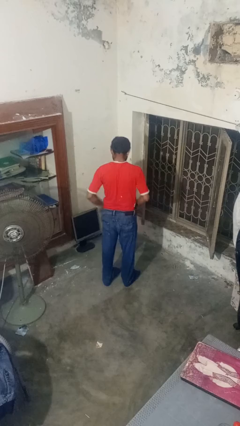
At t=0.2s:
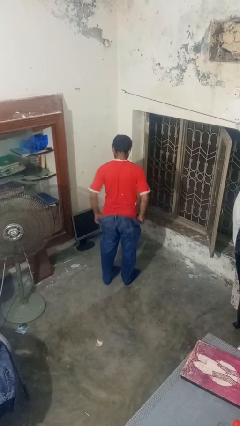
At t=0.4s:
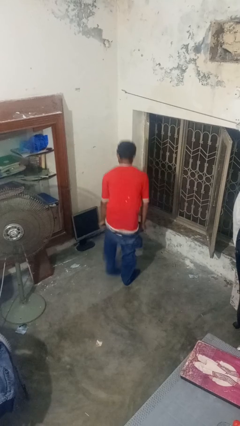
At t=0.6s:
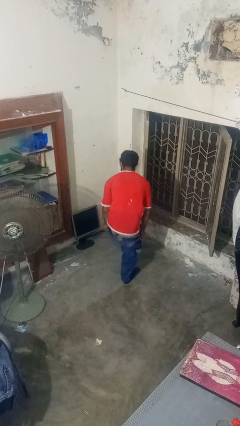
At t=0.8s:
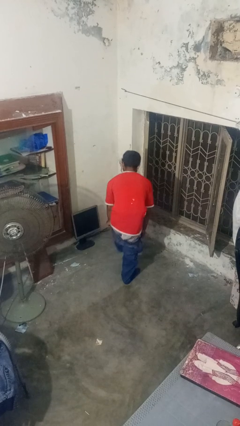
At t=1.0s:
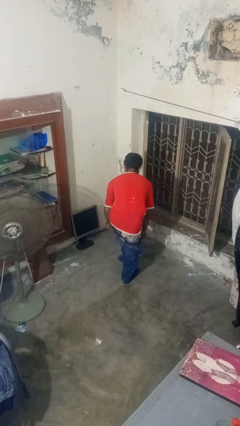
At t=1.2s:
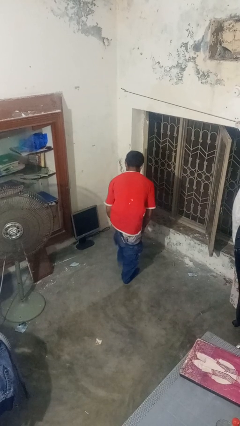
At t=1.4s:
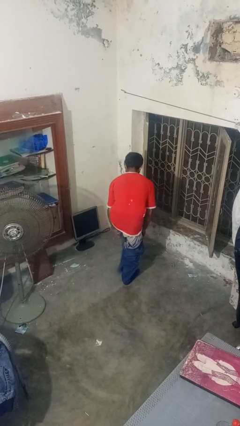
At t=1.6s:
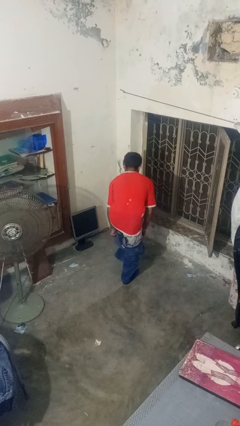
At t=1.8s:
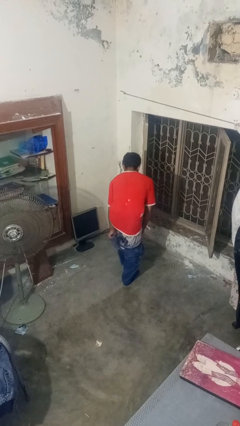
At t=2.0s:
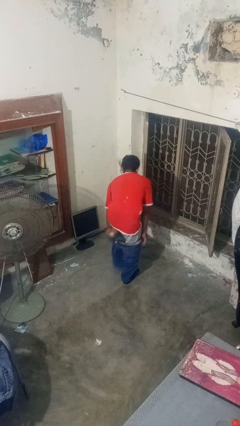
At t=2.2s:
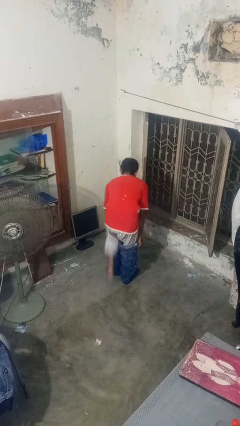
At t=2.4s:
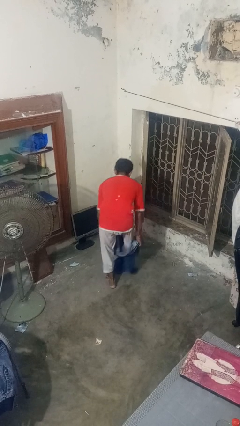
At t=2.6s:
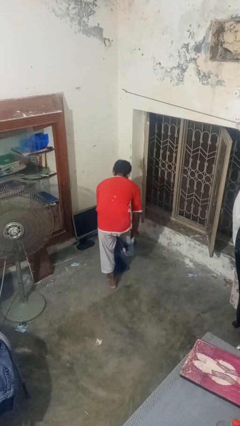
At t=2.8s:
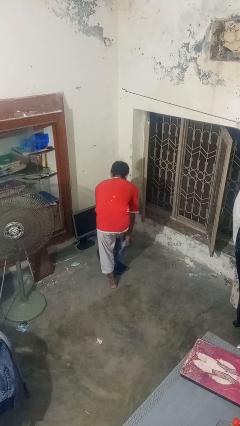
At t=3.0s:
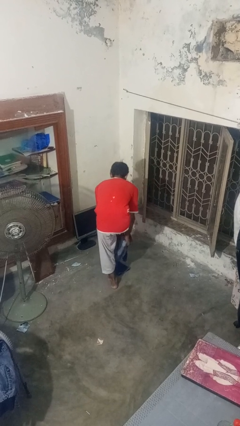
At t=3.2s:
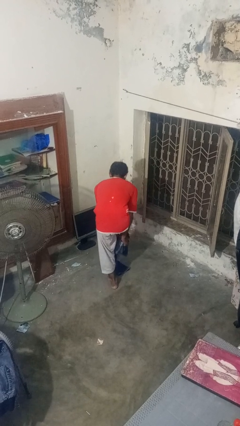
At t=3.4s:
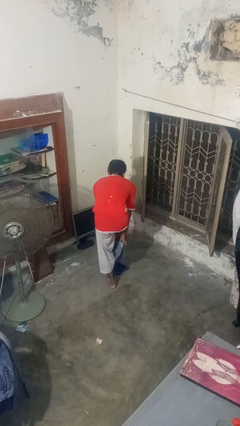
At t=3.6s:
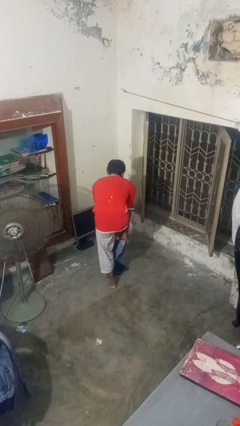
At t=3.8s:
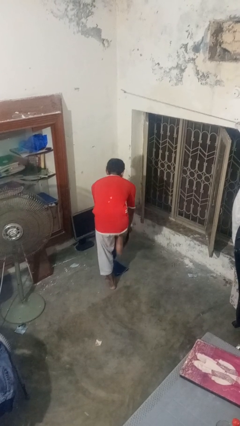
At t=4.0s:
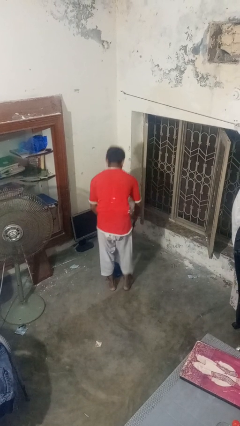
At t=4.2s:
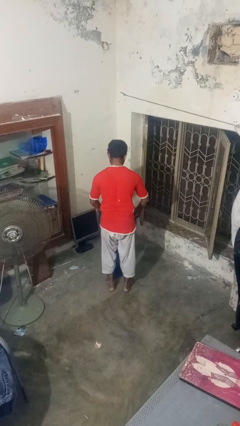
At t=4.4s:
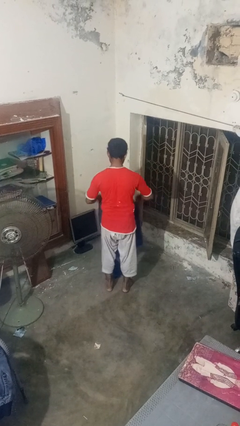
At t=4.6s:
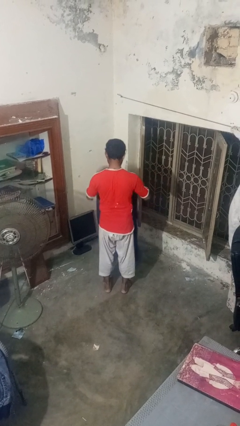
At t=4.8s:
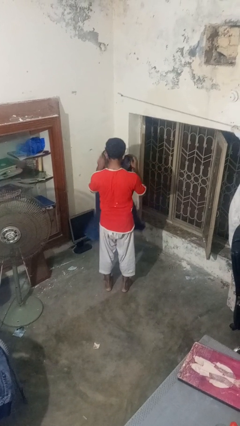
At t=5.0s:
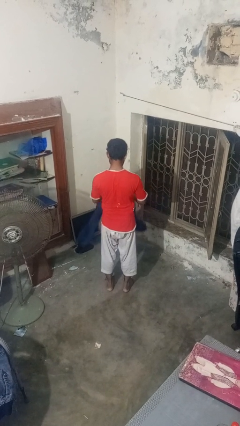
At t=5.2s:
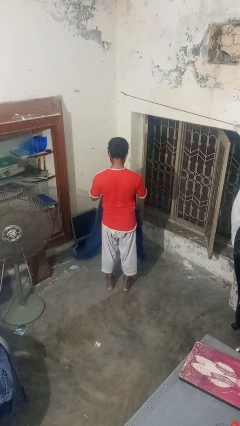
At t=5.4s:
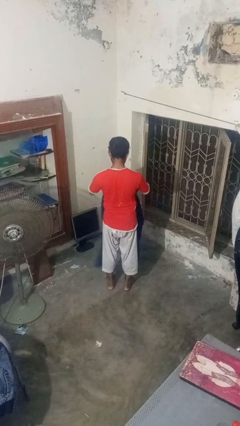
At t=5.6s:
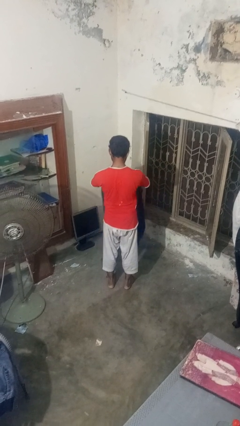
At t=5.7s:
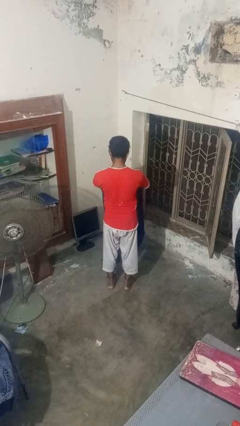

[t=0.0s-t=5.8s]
person takes off pants

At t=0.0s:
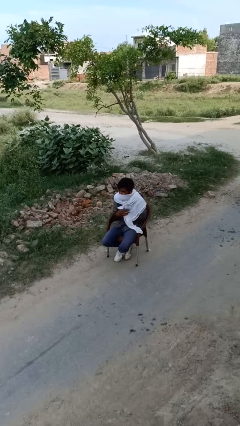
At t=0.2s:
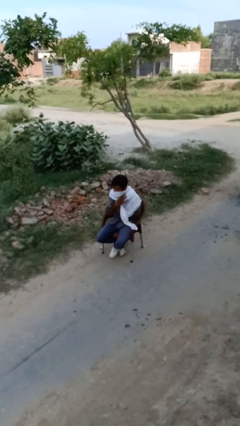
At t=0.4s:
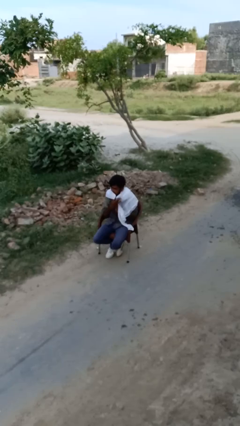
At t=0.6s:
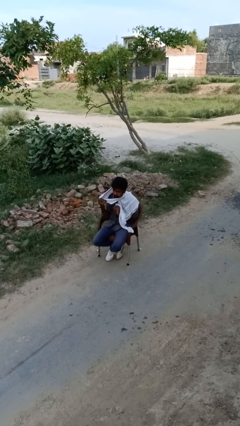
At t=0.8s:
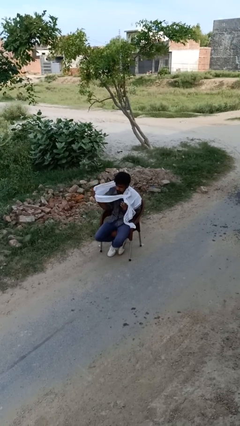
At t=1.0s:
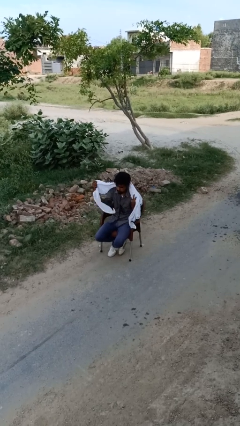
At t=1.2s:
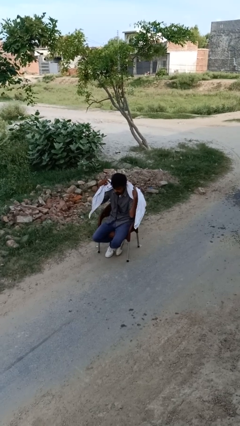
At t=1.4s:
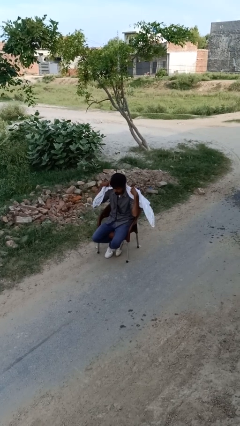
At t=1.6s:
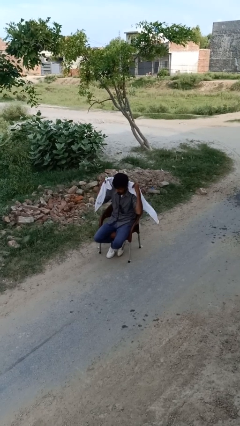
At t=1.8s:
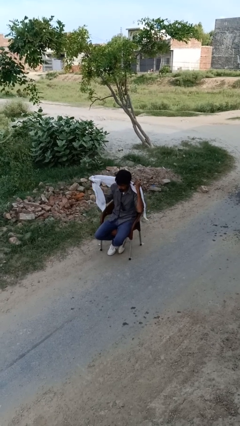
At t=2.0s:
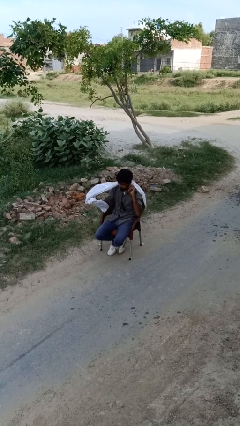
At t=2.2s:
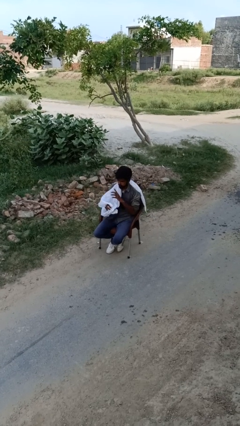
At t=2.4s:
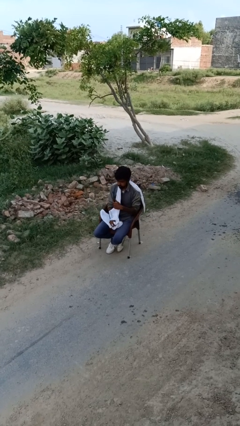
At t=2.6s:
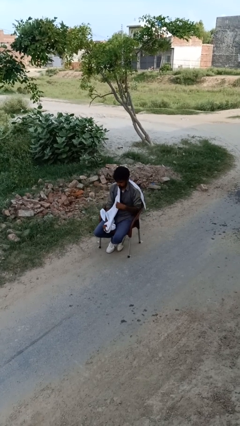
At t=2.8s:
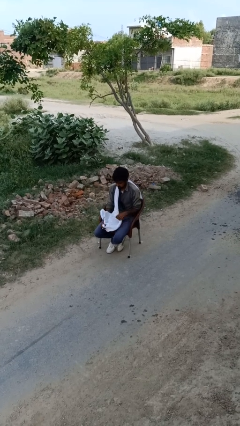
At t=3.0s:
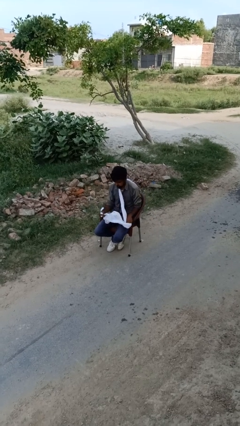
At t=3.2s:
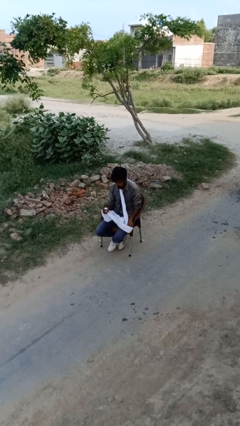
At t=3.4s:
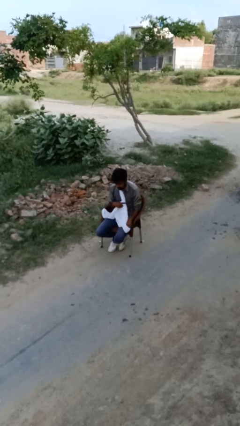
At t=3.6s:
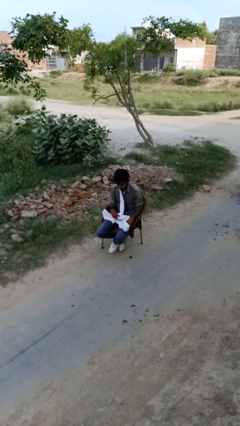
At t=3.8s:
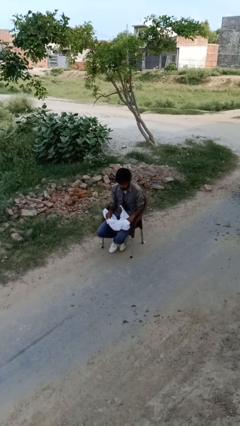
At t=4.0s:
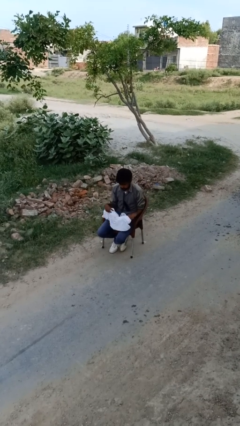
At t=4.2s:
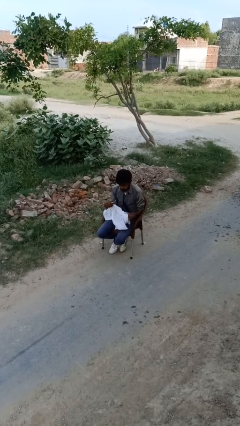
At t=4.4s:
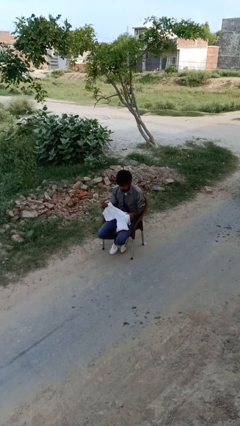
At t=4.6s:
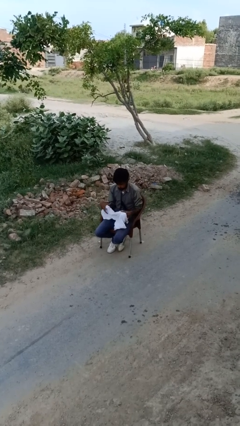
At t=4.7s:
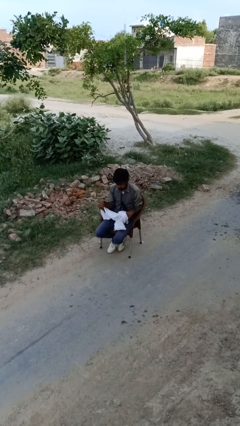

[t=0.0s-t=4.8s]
person takes off scarf

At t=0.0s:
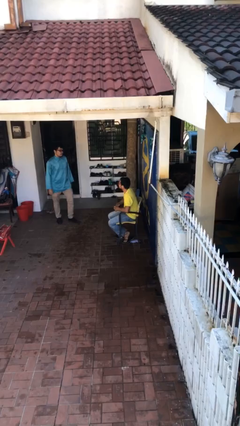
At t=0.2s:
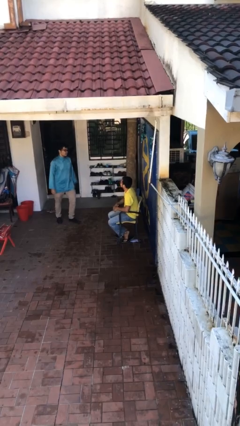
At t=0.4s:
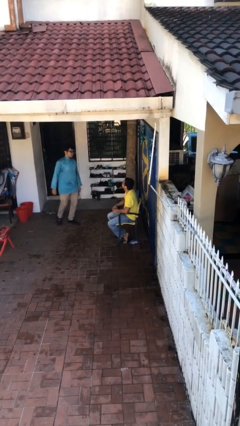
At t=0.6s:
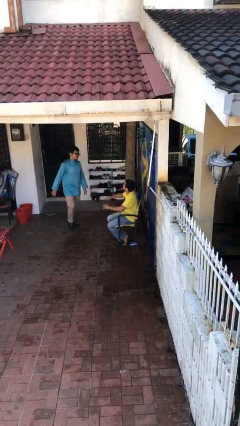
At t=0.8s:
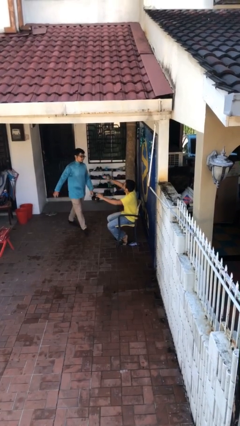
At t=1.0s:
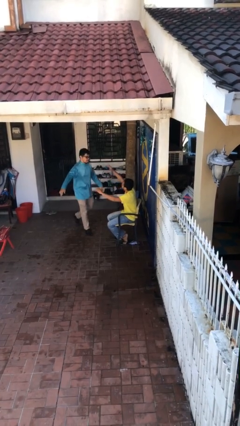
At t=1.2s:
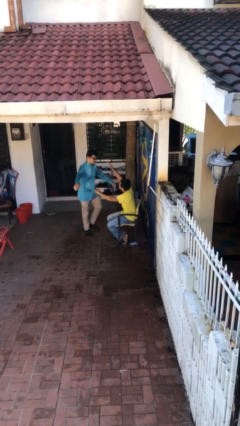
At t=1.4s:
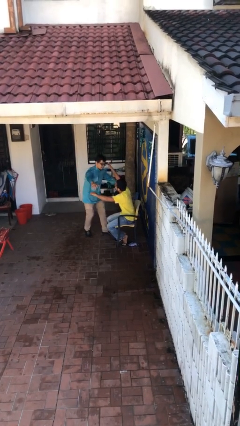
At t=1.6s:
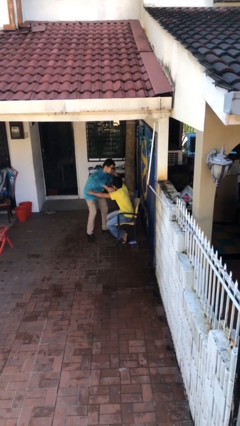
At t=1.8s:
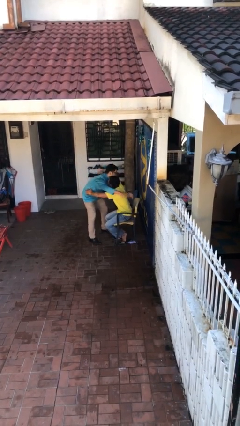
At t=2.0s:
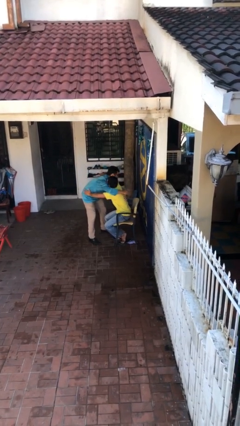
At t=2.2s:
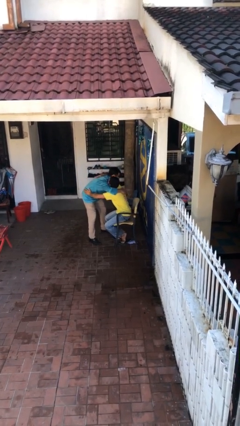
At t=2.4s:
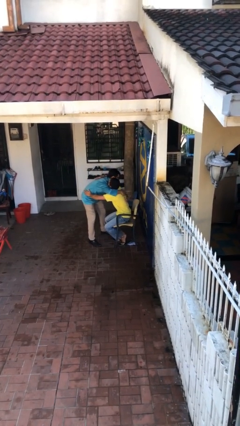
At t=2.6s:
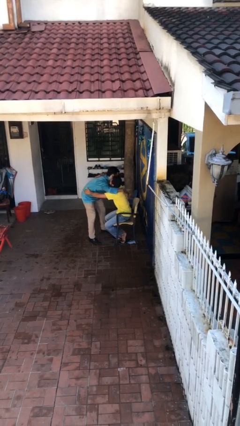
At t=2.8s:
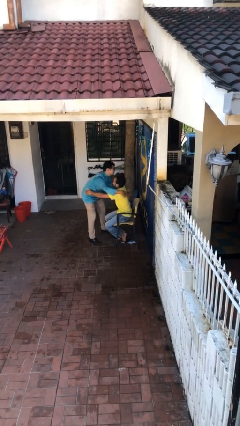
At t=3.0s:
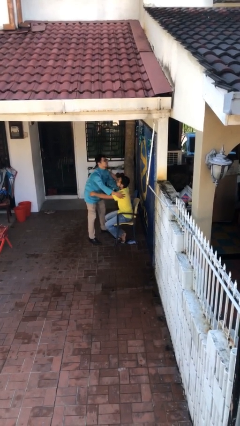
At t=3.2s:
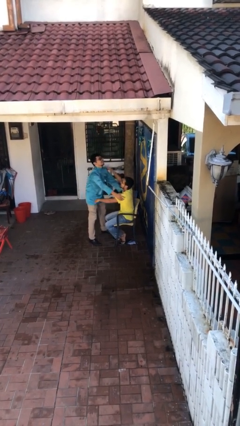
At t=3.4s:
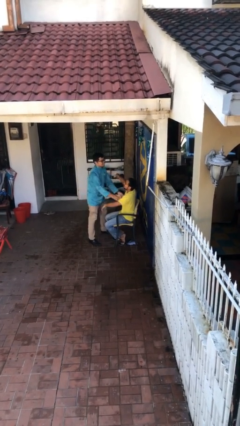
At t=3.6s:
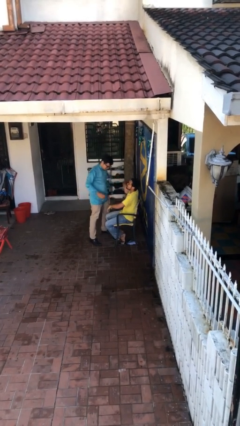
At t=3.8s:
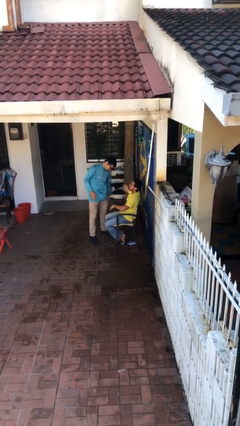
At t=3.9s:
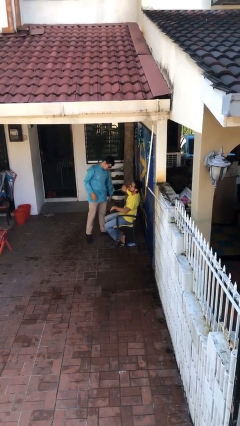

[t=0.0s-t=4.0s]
person embraces person

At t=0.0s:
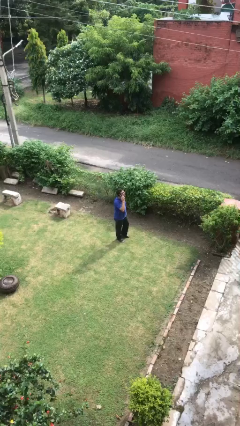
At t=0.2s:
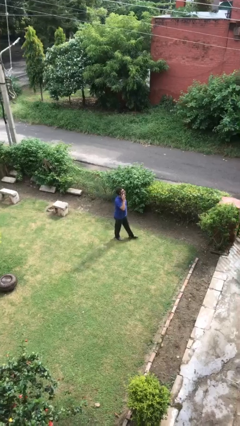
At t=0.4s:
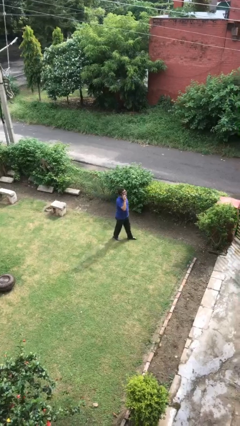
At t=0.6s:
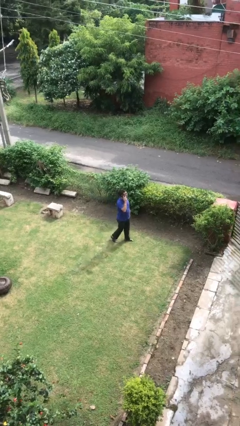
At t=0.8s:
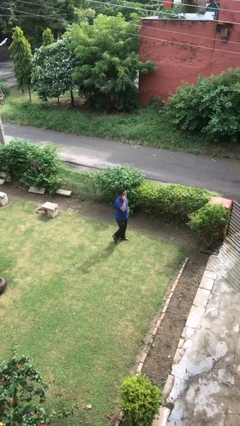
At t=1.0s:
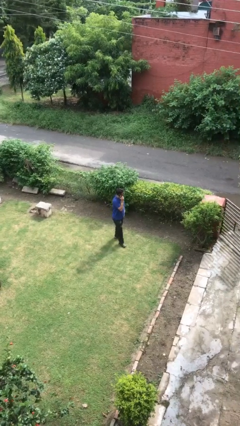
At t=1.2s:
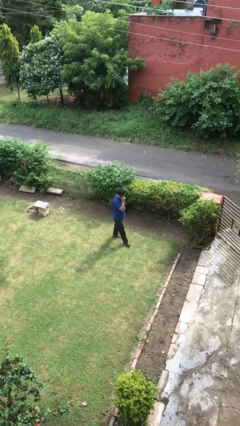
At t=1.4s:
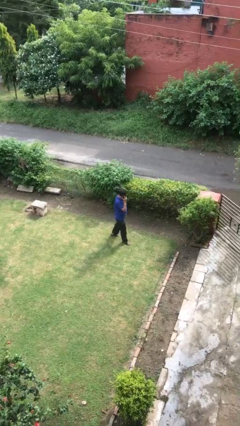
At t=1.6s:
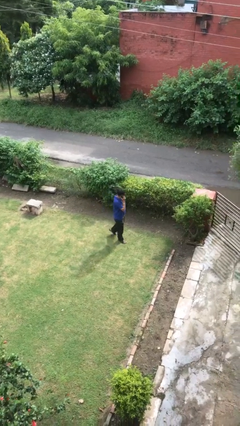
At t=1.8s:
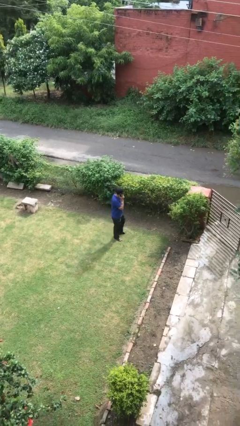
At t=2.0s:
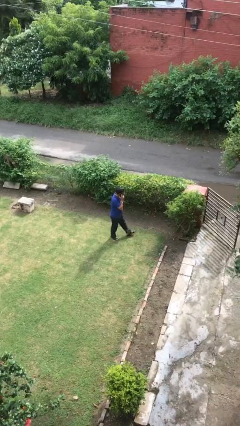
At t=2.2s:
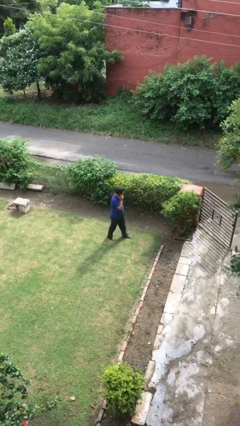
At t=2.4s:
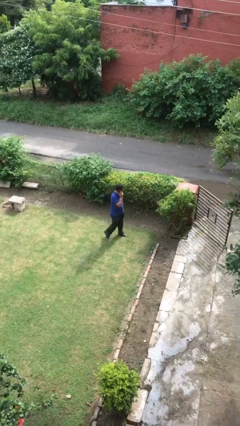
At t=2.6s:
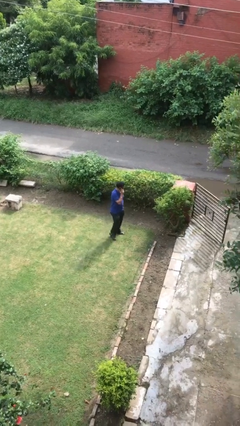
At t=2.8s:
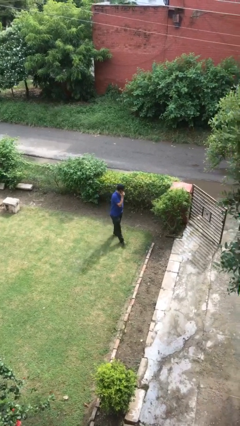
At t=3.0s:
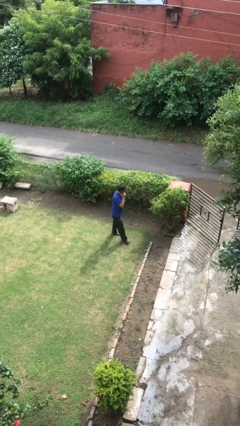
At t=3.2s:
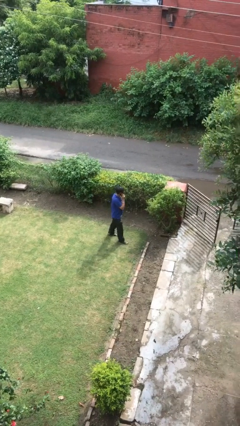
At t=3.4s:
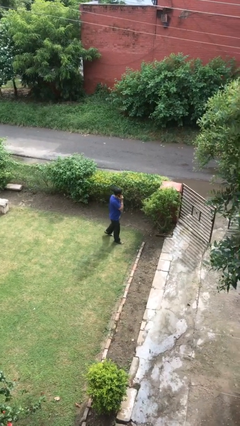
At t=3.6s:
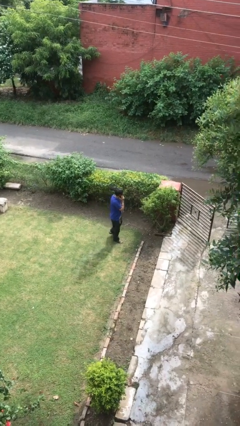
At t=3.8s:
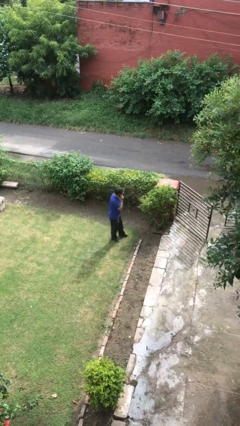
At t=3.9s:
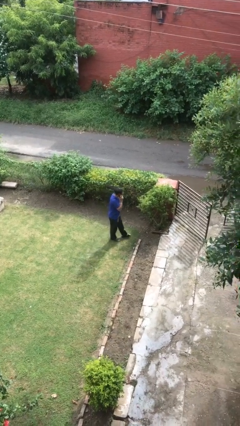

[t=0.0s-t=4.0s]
person talks on phone
